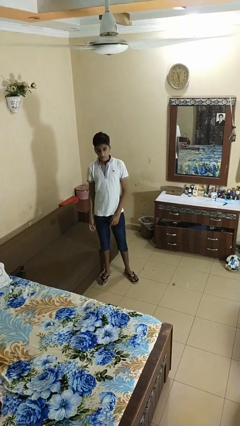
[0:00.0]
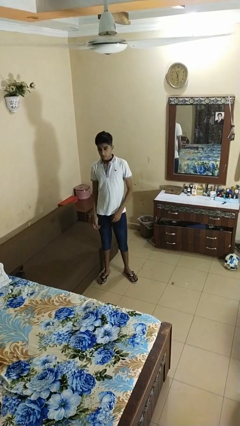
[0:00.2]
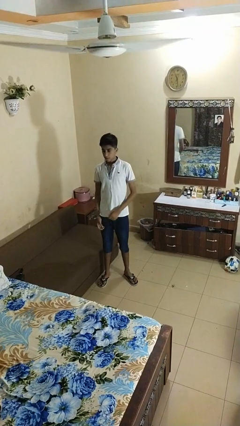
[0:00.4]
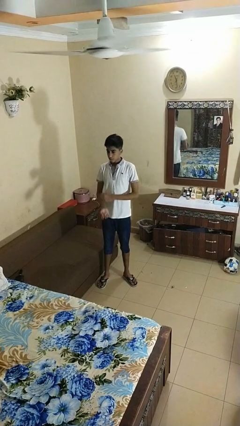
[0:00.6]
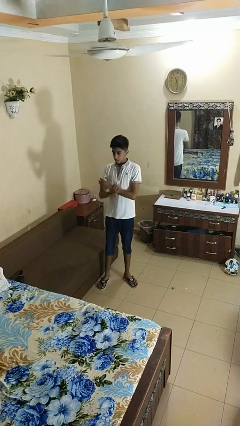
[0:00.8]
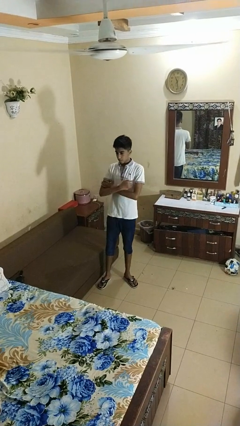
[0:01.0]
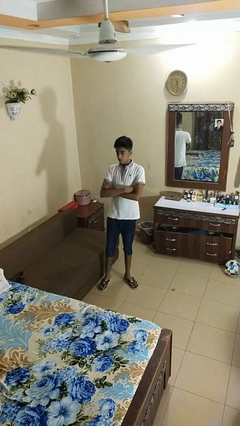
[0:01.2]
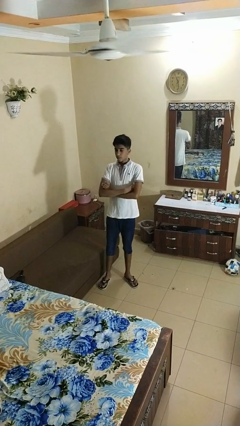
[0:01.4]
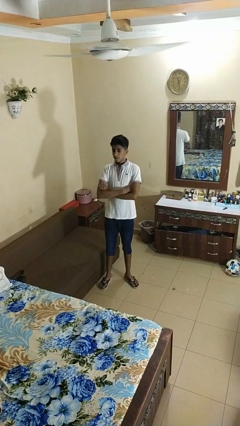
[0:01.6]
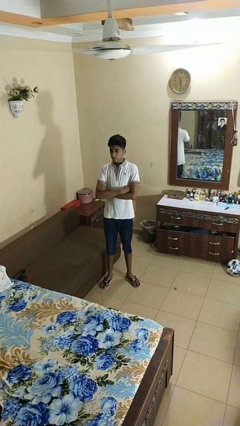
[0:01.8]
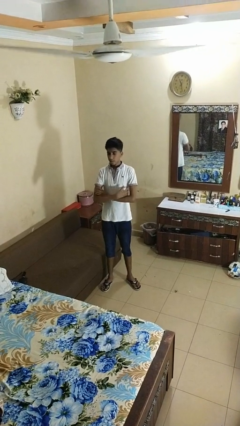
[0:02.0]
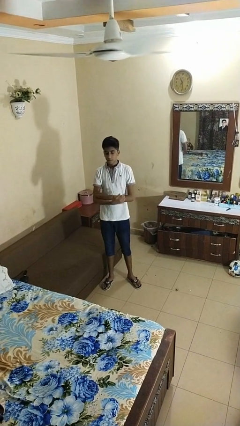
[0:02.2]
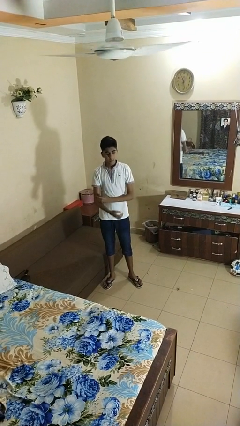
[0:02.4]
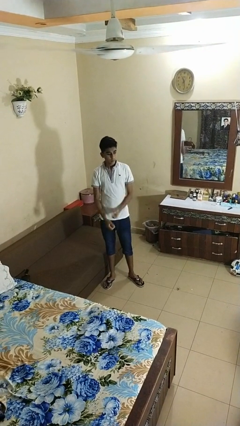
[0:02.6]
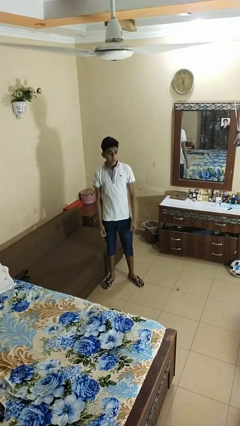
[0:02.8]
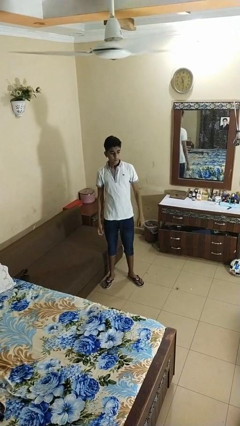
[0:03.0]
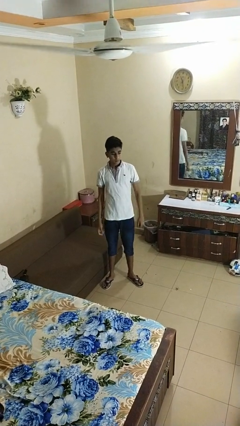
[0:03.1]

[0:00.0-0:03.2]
person crosses arms

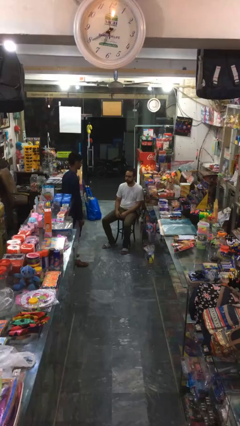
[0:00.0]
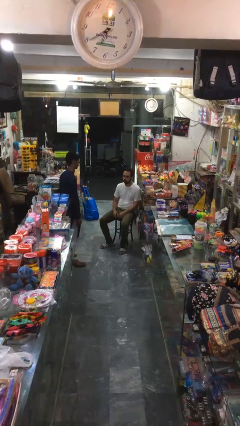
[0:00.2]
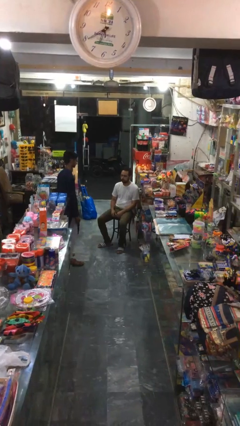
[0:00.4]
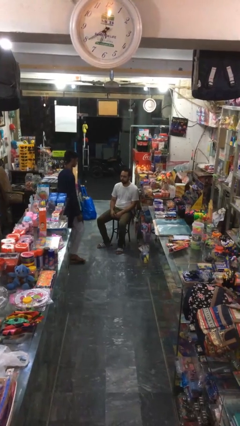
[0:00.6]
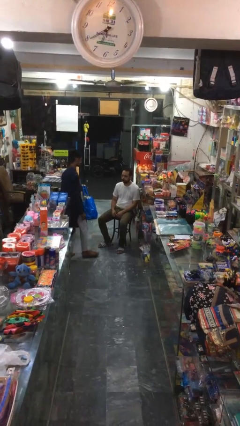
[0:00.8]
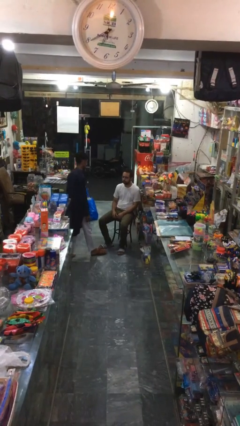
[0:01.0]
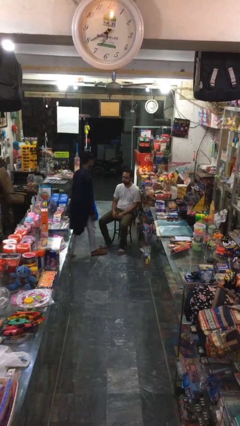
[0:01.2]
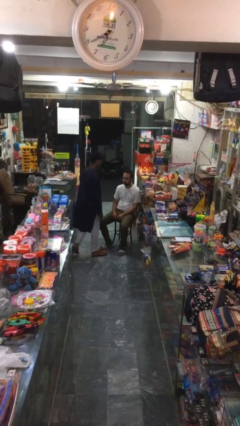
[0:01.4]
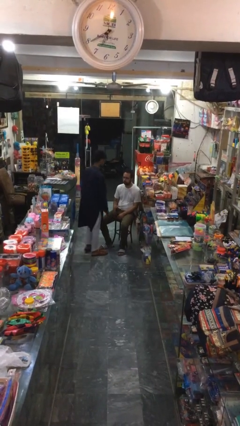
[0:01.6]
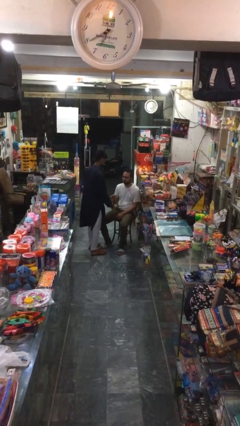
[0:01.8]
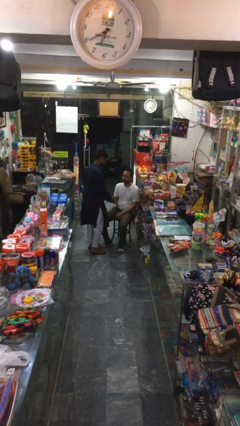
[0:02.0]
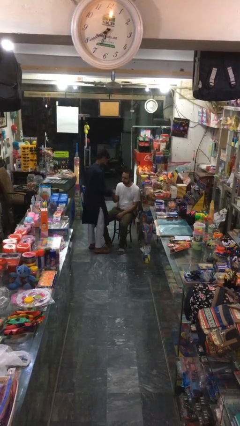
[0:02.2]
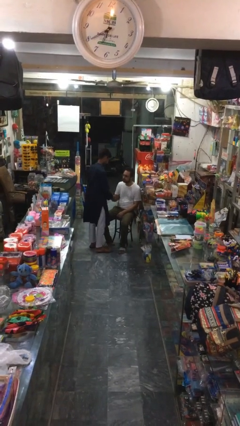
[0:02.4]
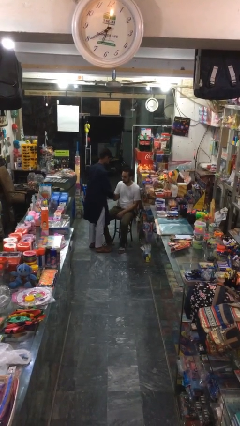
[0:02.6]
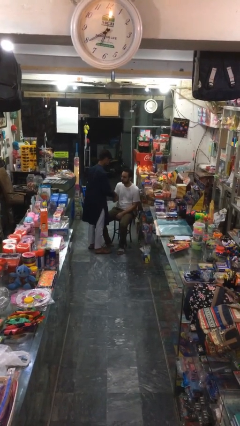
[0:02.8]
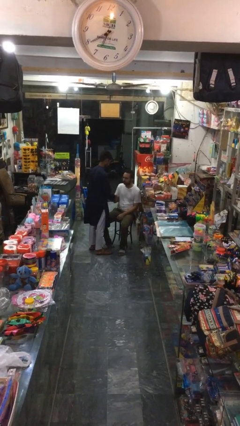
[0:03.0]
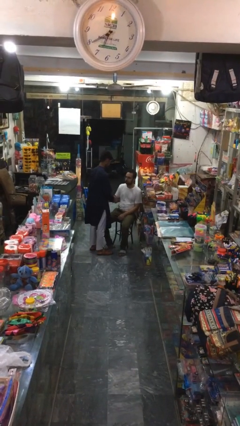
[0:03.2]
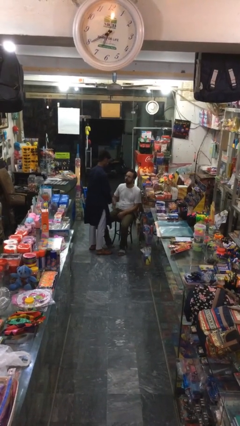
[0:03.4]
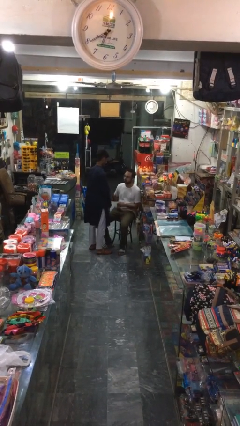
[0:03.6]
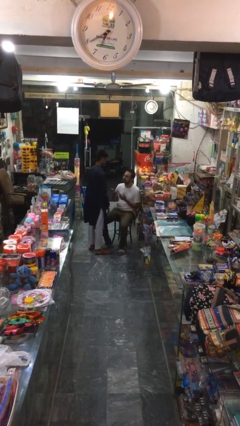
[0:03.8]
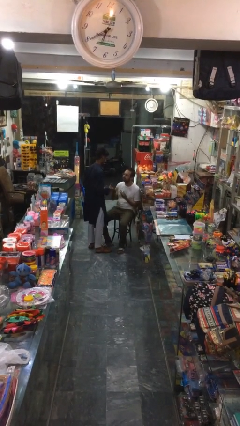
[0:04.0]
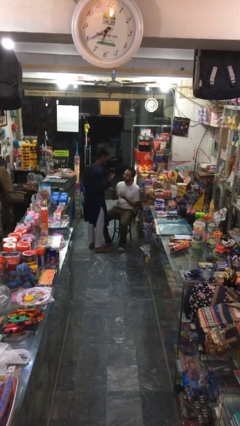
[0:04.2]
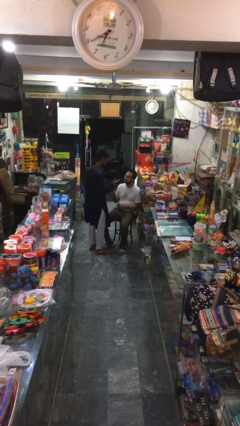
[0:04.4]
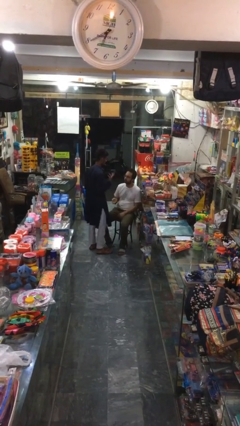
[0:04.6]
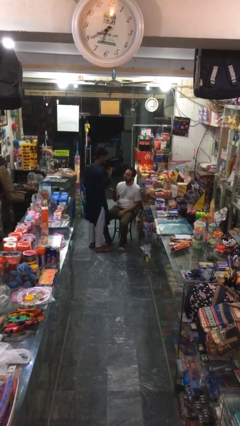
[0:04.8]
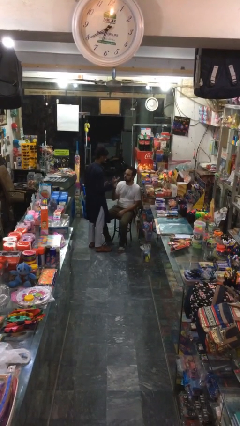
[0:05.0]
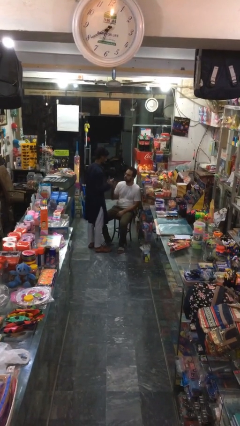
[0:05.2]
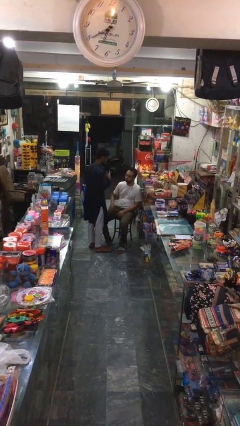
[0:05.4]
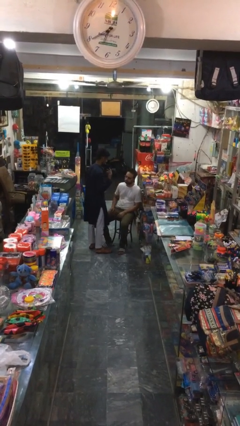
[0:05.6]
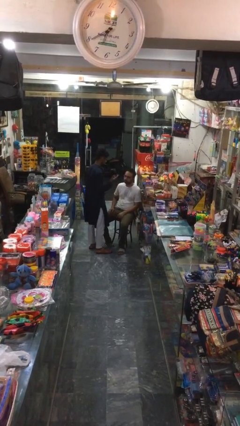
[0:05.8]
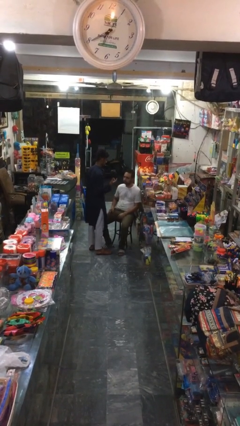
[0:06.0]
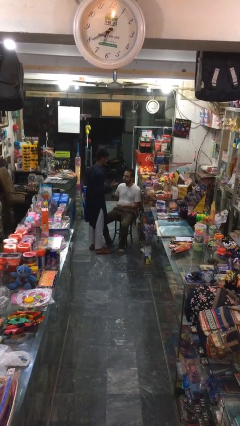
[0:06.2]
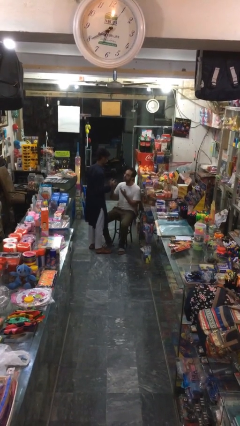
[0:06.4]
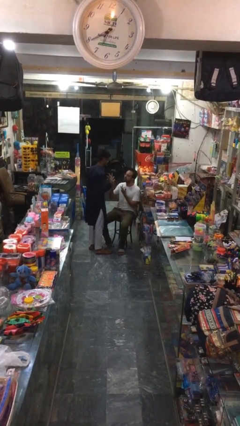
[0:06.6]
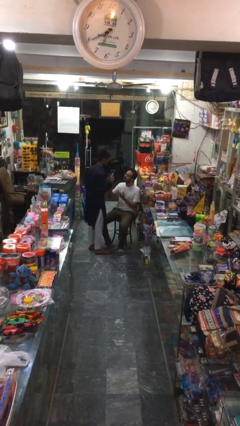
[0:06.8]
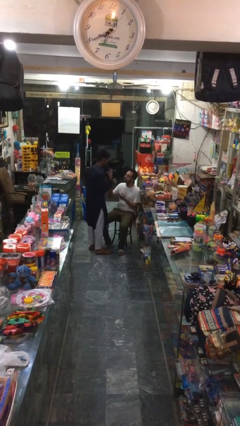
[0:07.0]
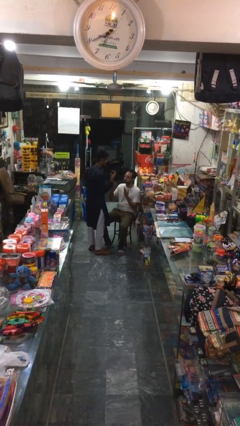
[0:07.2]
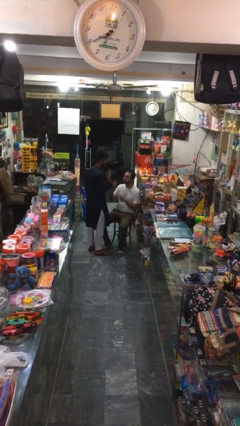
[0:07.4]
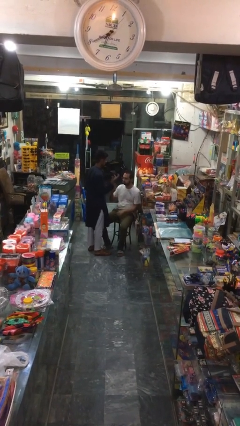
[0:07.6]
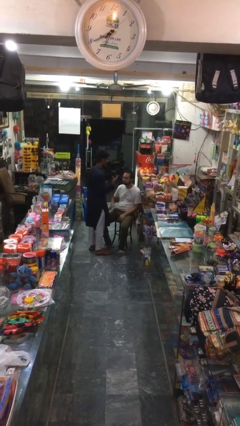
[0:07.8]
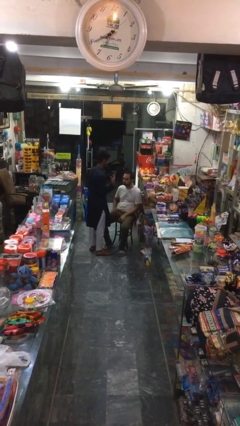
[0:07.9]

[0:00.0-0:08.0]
person shakes hand

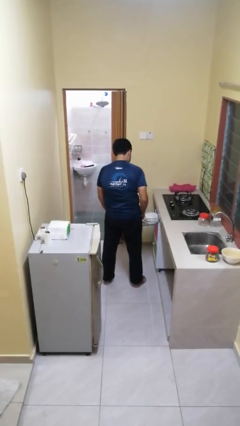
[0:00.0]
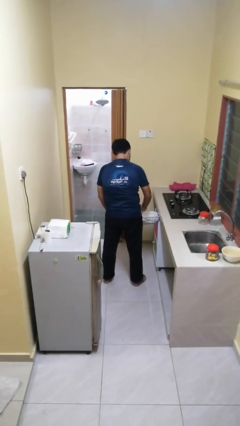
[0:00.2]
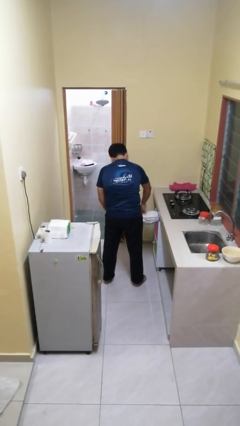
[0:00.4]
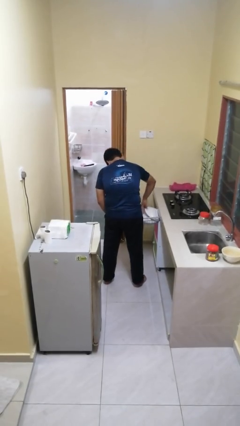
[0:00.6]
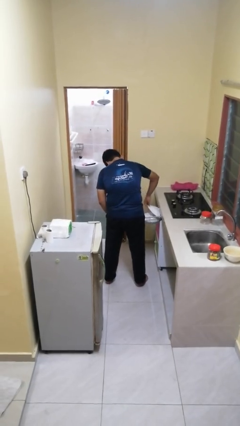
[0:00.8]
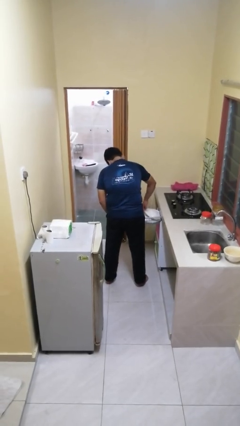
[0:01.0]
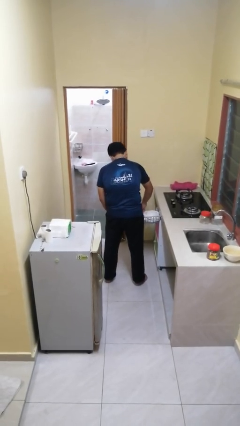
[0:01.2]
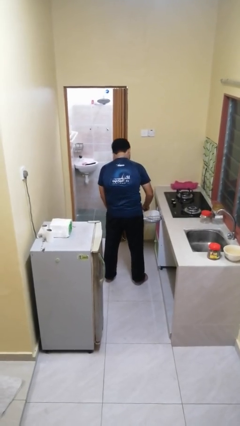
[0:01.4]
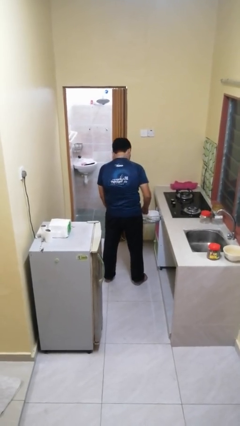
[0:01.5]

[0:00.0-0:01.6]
person searches in kitchen drawer

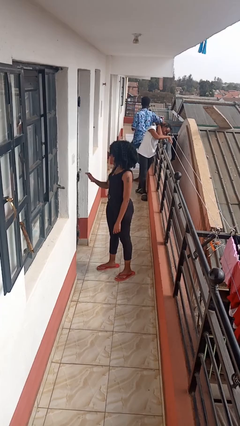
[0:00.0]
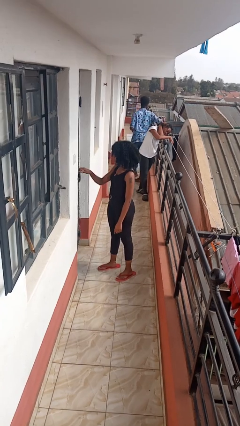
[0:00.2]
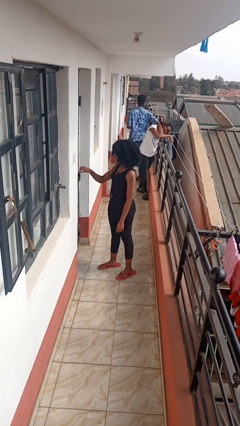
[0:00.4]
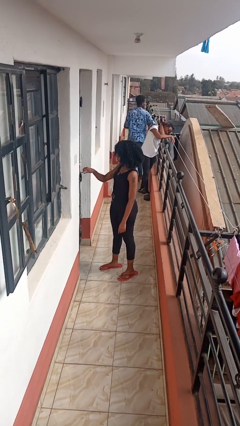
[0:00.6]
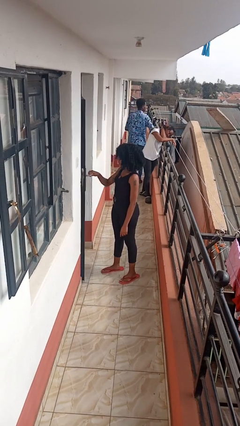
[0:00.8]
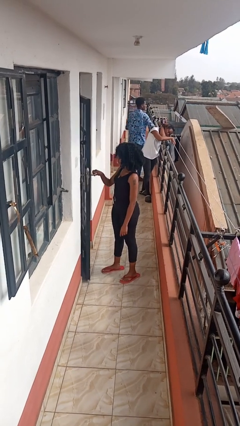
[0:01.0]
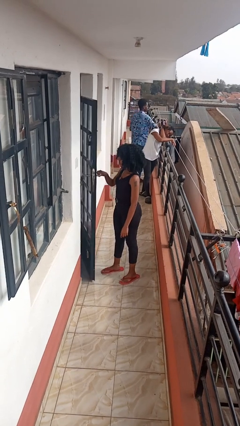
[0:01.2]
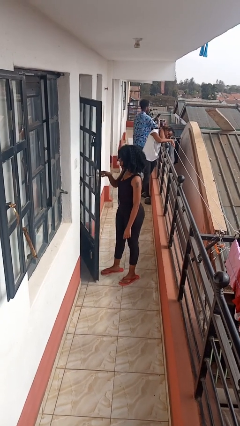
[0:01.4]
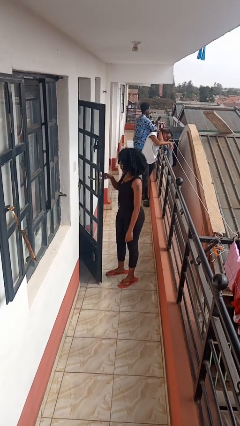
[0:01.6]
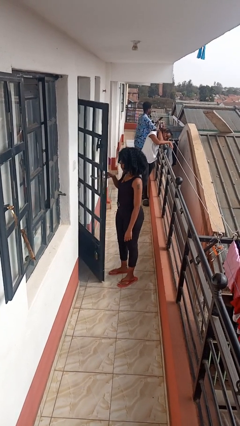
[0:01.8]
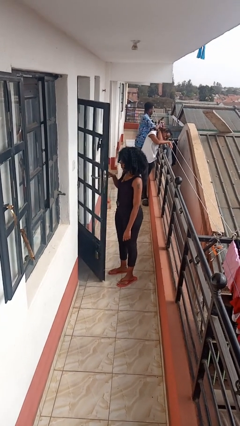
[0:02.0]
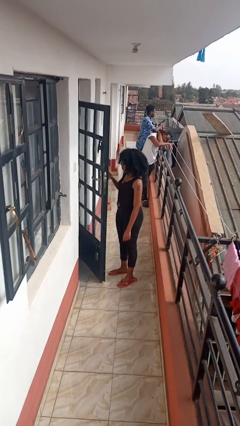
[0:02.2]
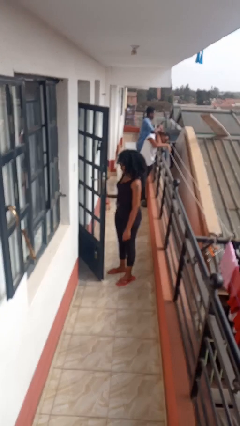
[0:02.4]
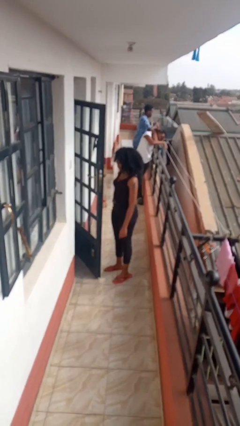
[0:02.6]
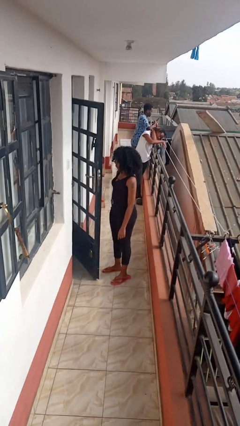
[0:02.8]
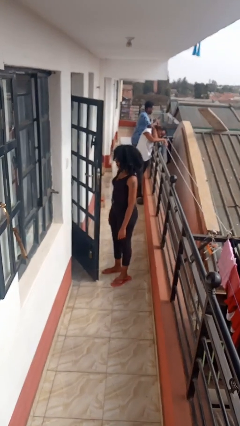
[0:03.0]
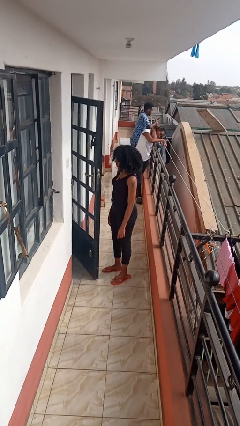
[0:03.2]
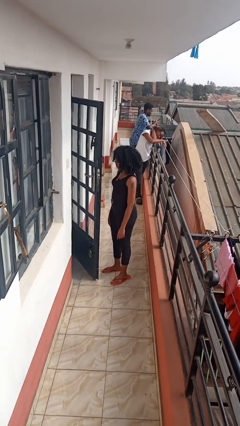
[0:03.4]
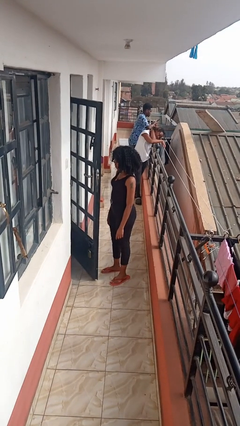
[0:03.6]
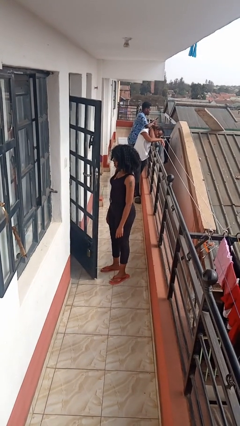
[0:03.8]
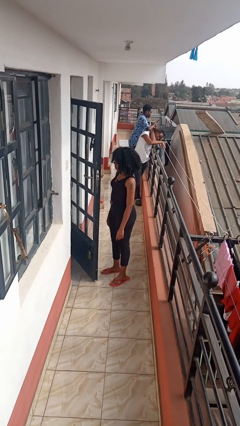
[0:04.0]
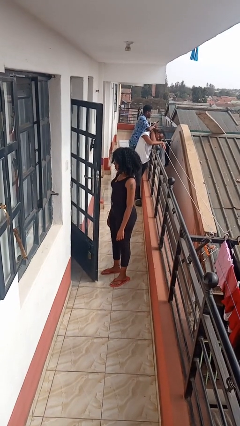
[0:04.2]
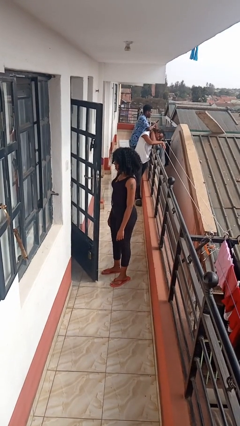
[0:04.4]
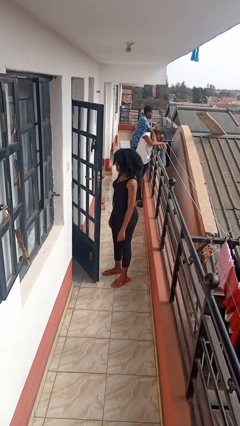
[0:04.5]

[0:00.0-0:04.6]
person opens facility door

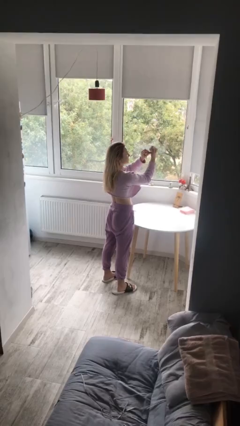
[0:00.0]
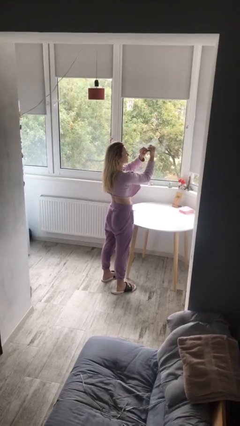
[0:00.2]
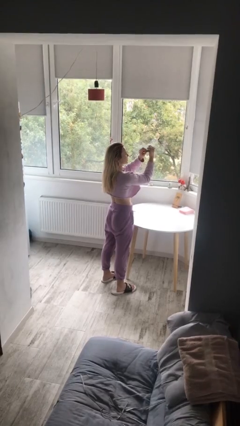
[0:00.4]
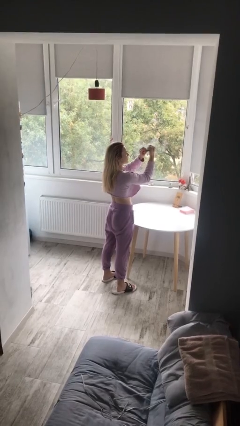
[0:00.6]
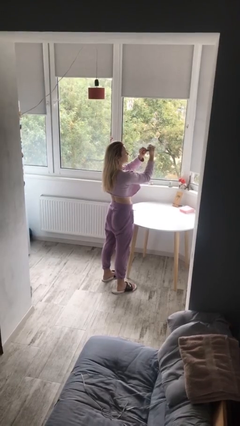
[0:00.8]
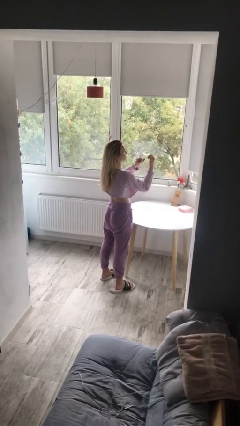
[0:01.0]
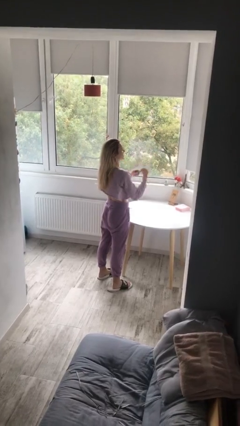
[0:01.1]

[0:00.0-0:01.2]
person files fingernails
